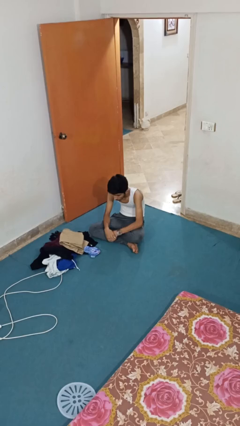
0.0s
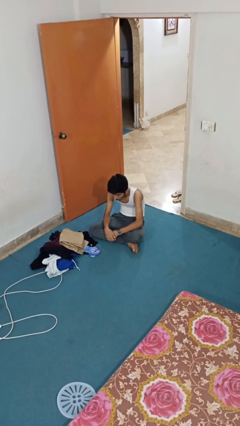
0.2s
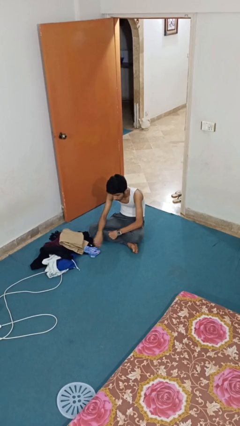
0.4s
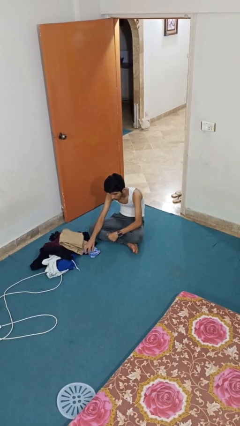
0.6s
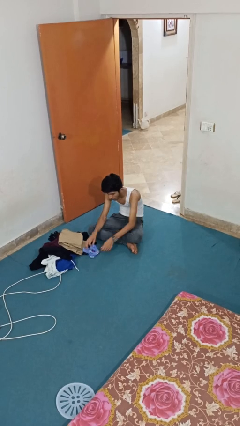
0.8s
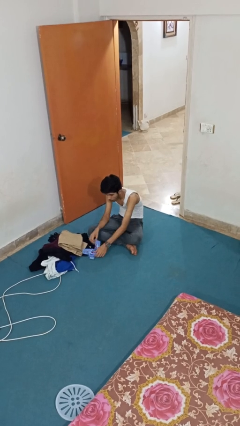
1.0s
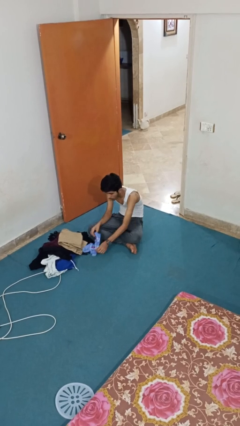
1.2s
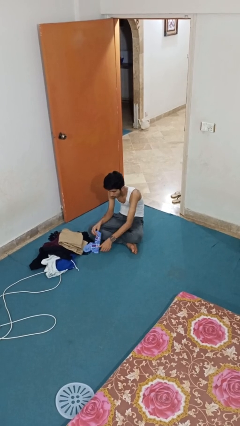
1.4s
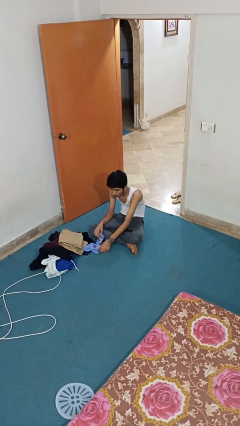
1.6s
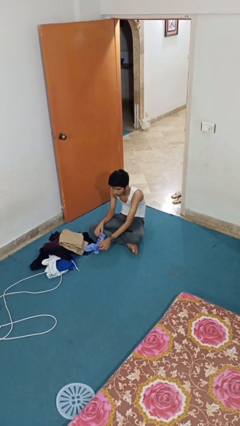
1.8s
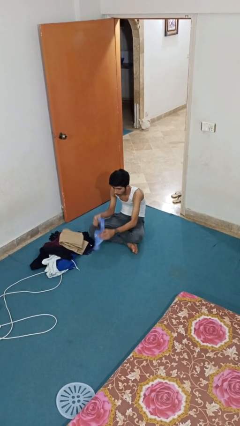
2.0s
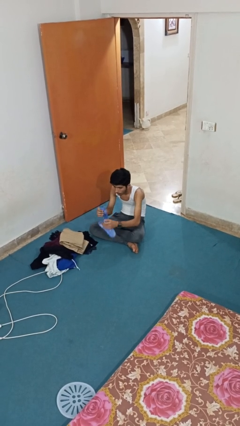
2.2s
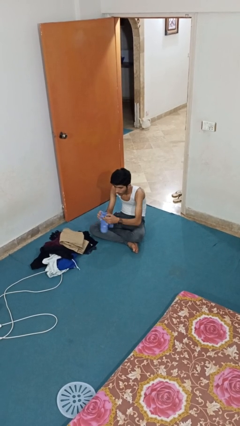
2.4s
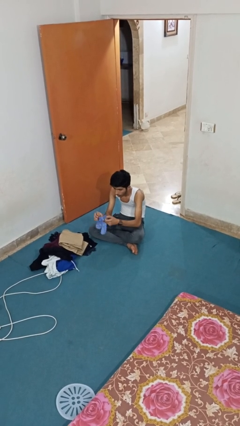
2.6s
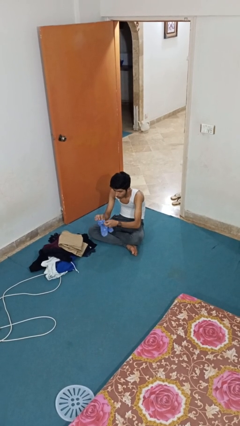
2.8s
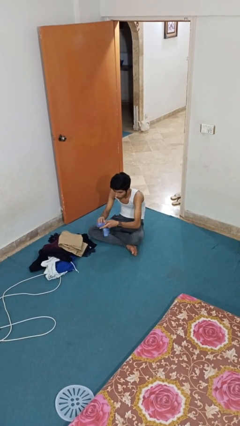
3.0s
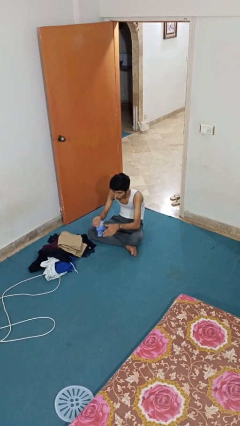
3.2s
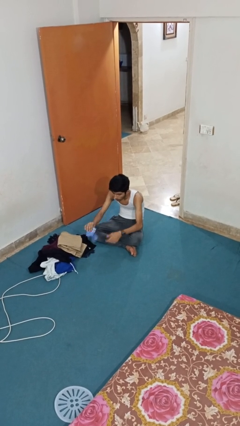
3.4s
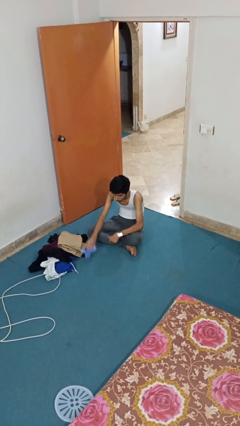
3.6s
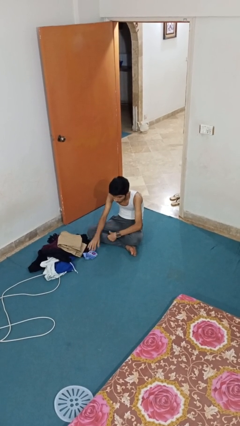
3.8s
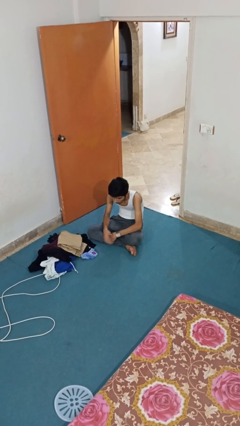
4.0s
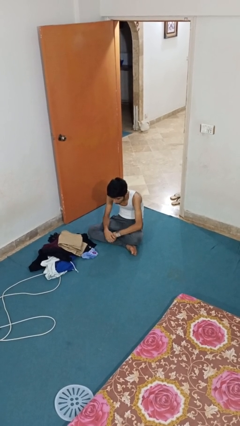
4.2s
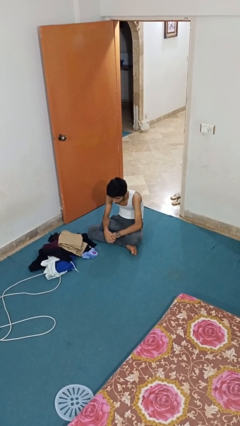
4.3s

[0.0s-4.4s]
person folds socks

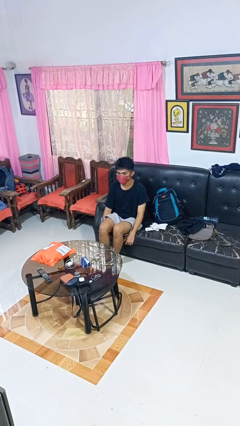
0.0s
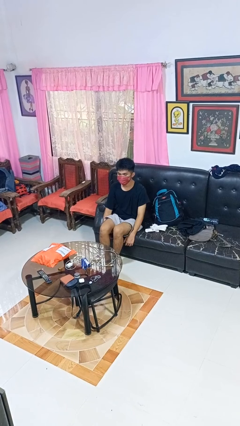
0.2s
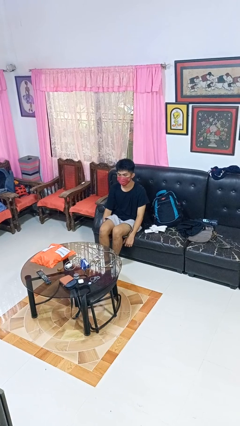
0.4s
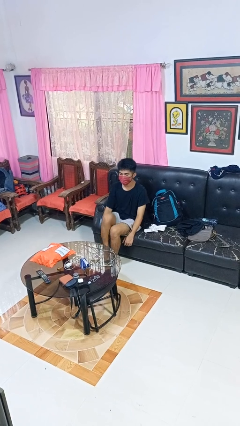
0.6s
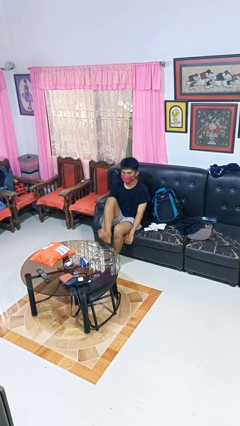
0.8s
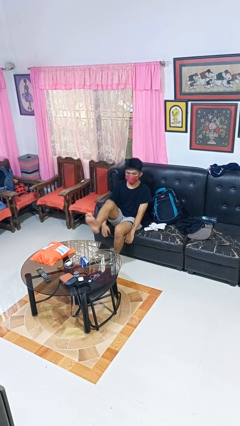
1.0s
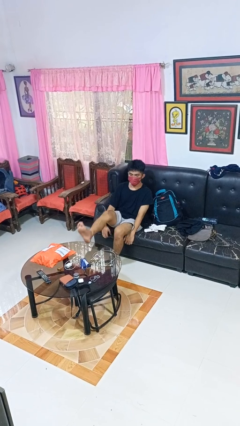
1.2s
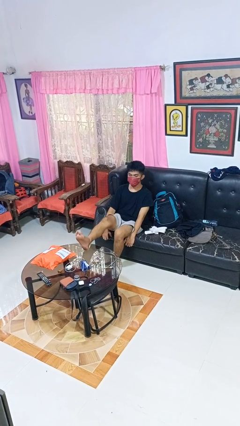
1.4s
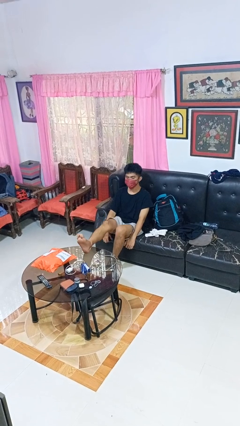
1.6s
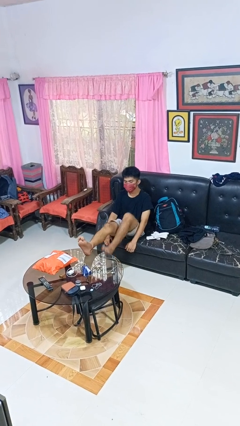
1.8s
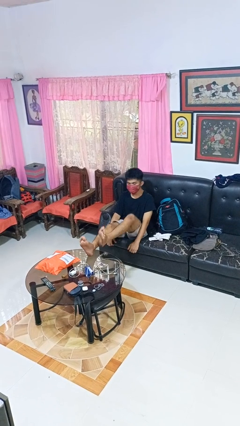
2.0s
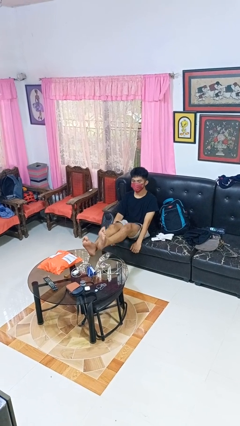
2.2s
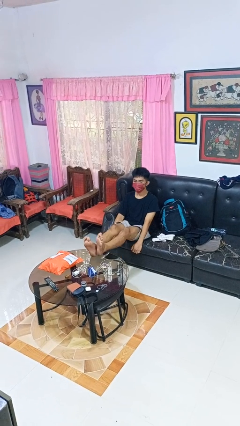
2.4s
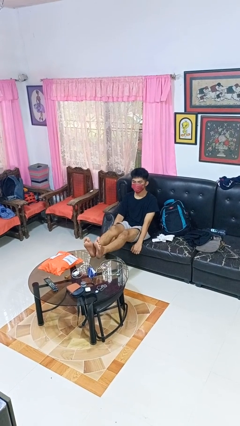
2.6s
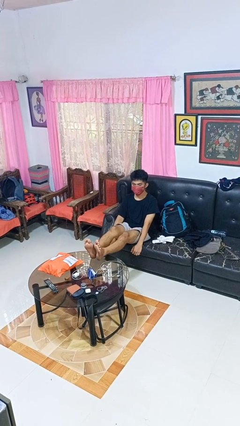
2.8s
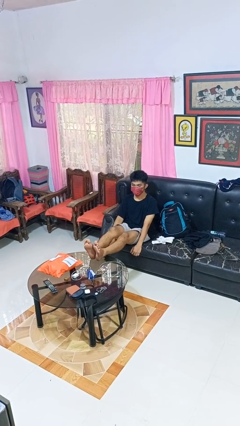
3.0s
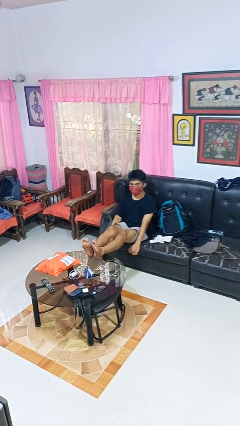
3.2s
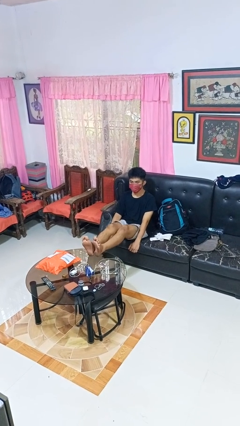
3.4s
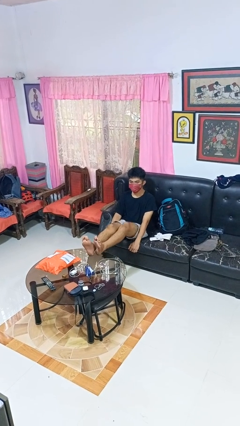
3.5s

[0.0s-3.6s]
person puts feet up

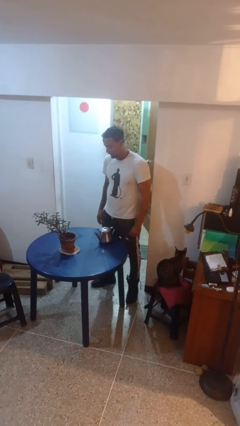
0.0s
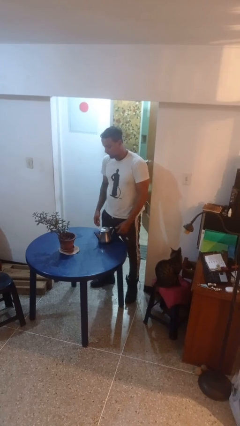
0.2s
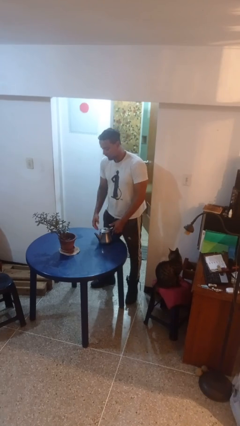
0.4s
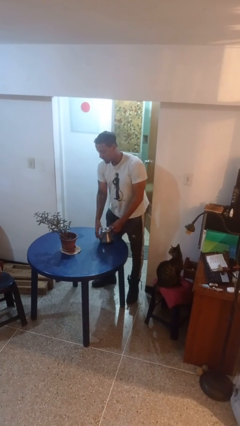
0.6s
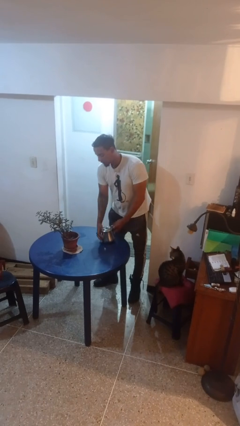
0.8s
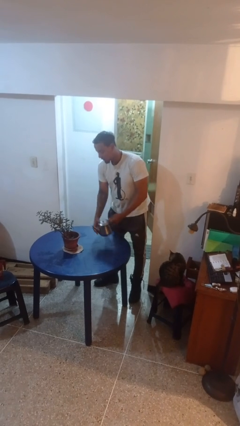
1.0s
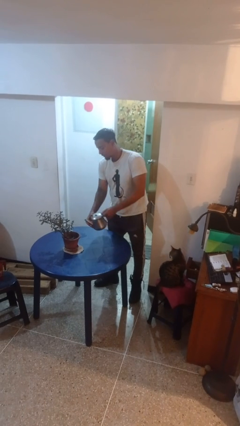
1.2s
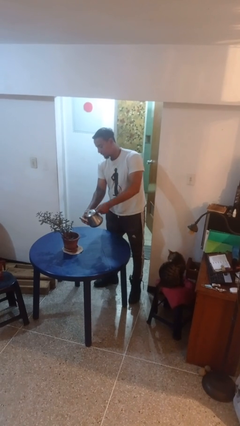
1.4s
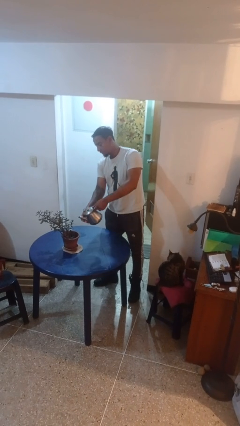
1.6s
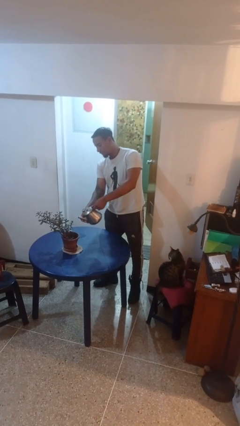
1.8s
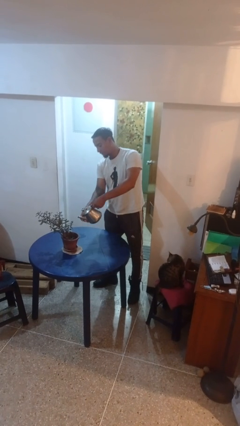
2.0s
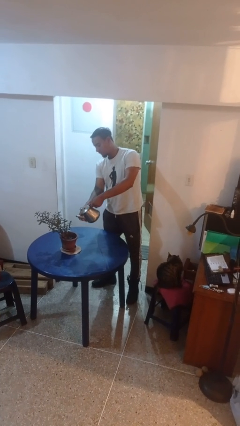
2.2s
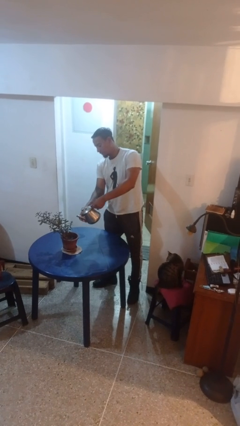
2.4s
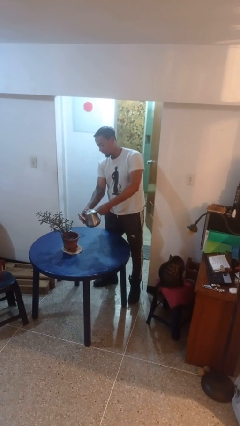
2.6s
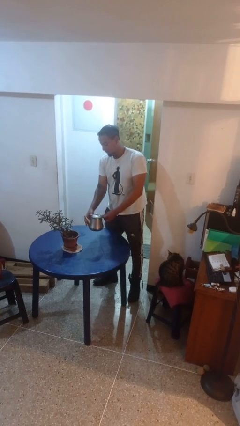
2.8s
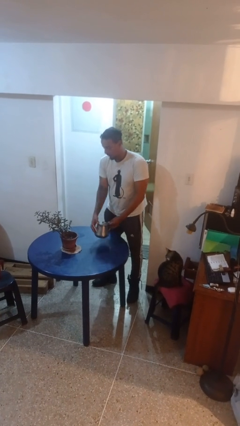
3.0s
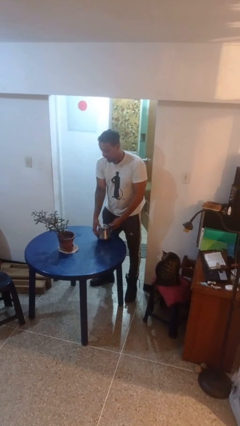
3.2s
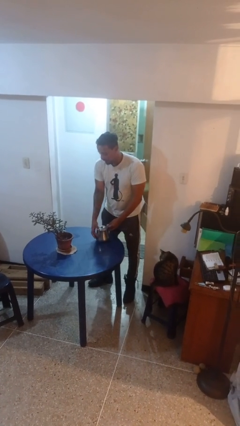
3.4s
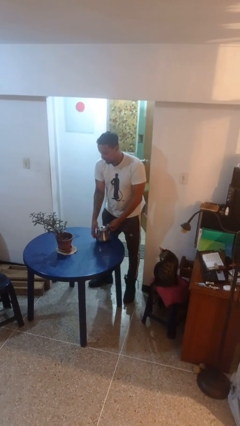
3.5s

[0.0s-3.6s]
person waters houseplant

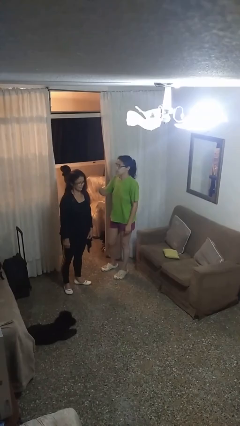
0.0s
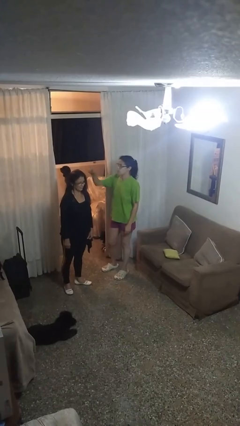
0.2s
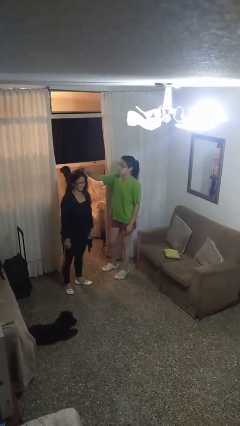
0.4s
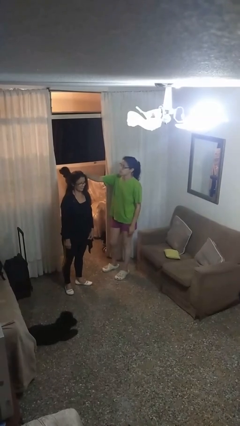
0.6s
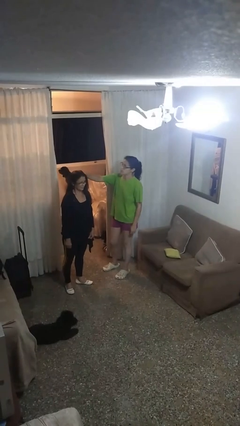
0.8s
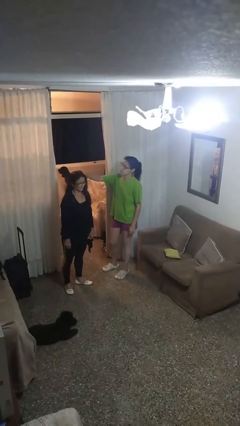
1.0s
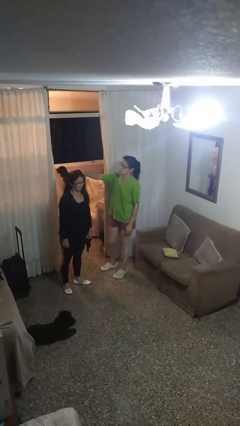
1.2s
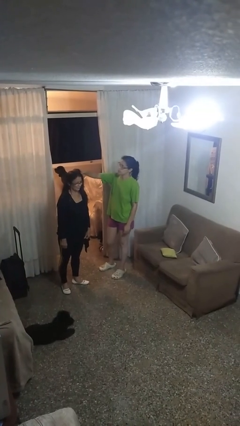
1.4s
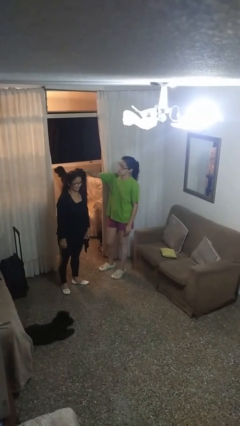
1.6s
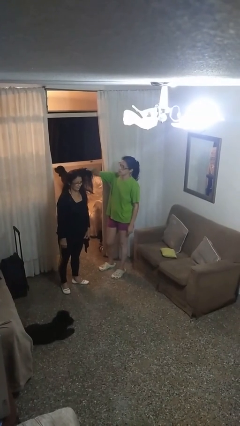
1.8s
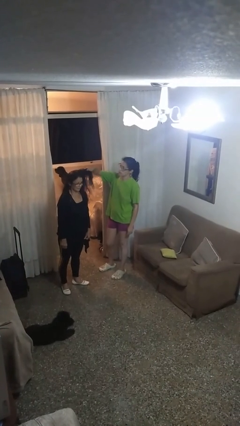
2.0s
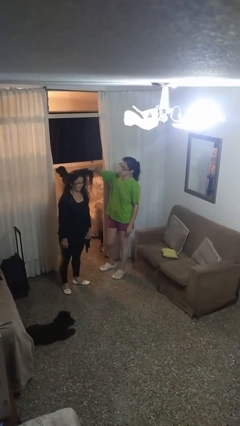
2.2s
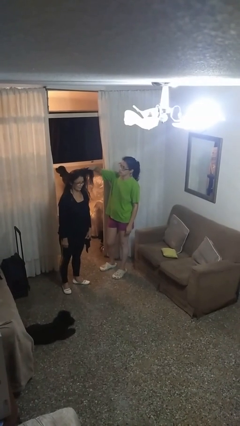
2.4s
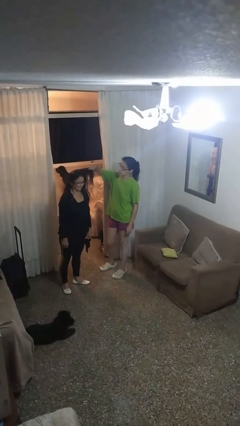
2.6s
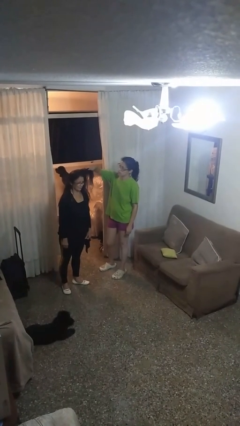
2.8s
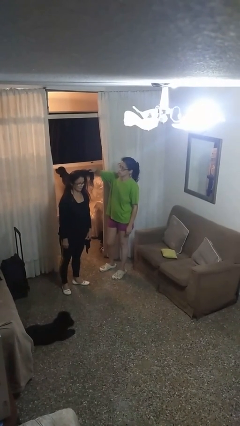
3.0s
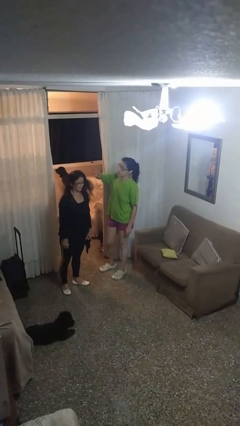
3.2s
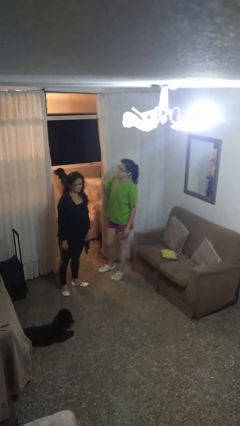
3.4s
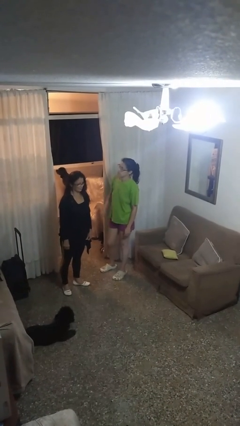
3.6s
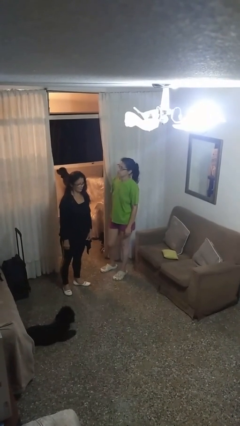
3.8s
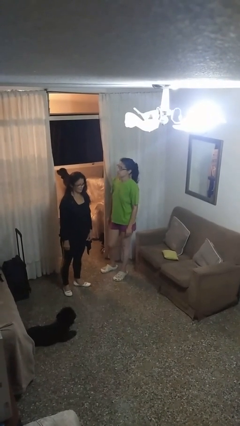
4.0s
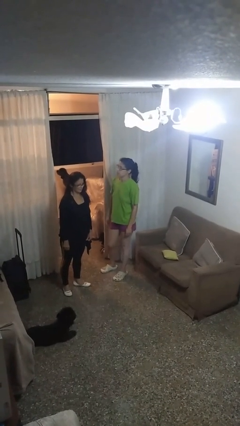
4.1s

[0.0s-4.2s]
person grabs person by hair

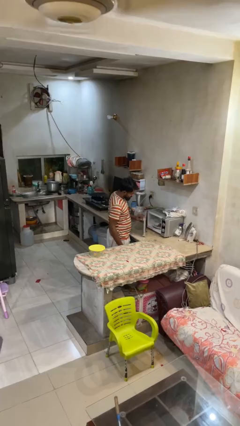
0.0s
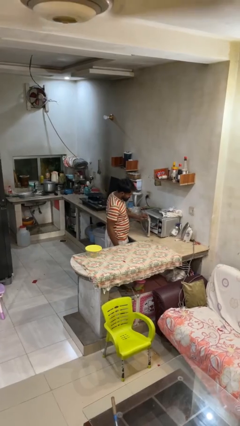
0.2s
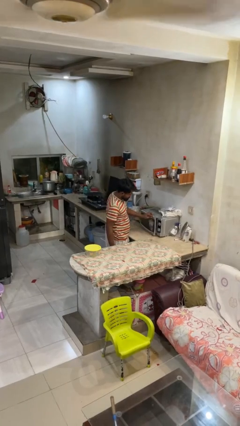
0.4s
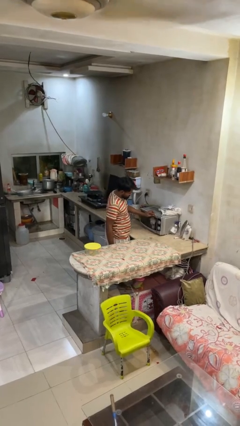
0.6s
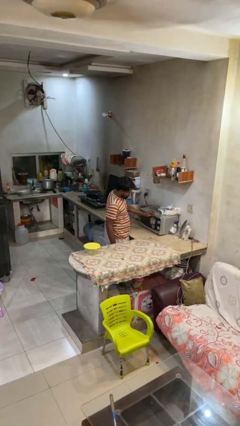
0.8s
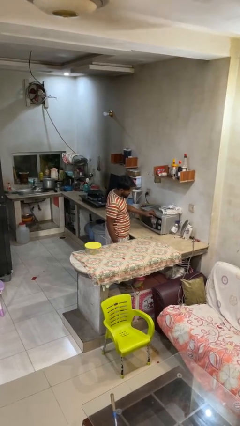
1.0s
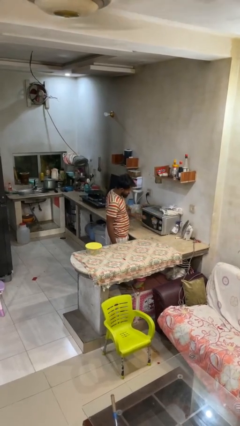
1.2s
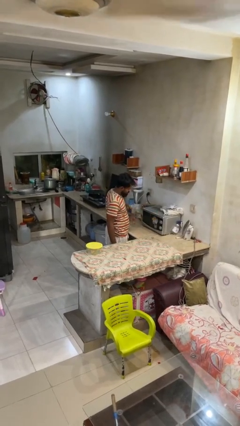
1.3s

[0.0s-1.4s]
person closes microwave

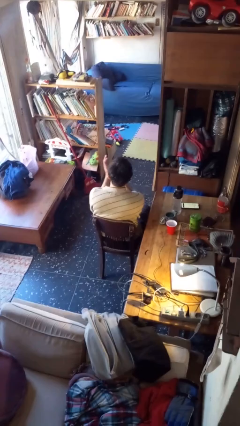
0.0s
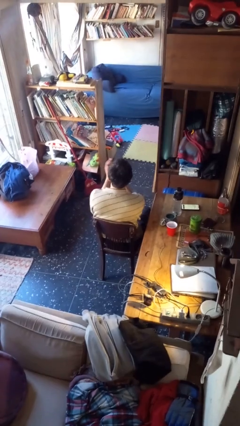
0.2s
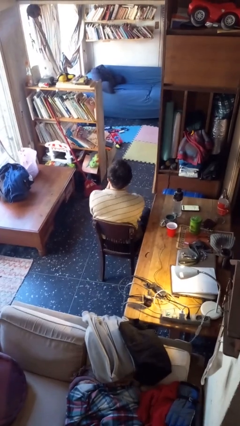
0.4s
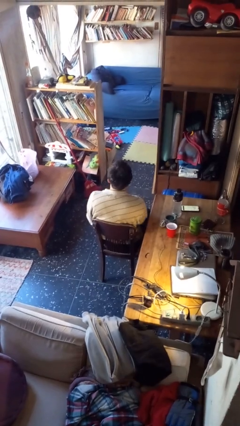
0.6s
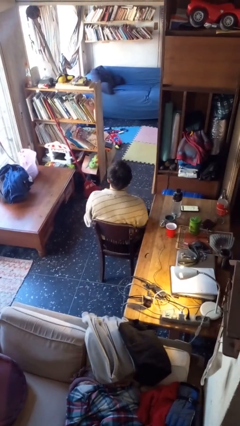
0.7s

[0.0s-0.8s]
person claps hands
